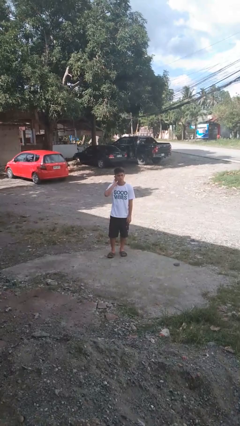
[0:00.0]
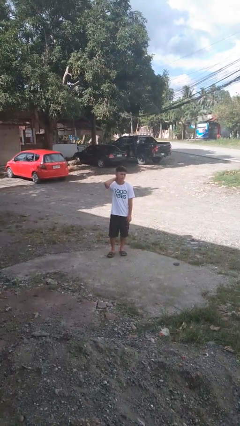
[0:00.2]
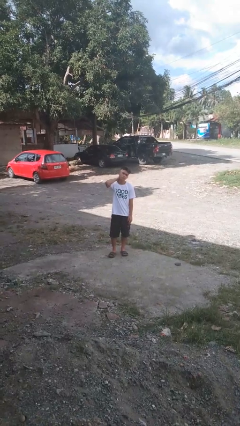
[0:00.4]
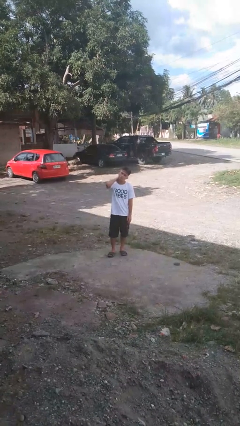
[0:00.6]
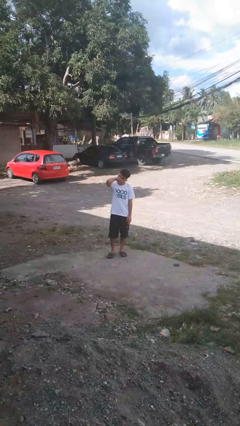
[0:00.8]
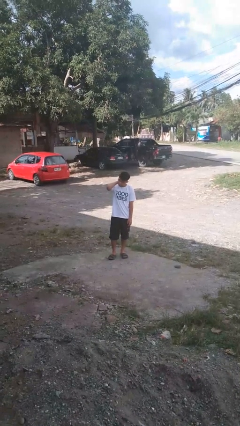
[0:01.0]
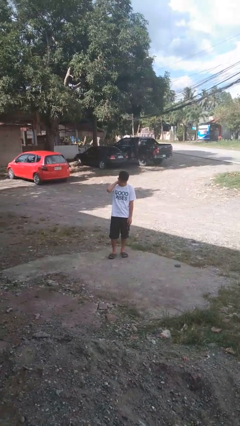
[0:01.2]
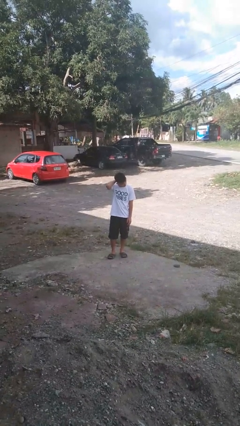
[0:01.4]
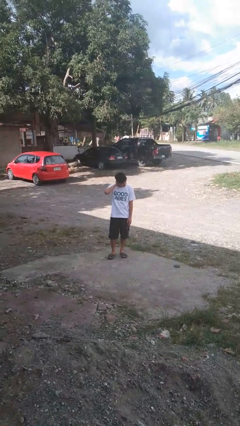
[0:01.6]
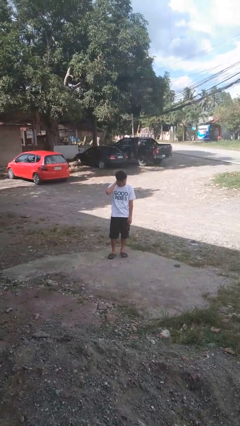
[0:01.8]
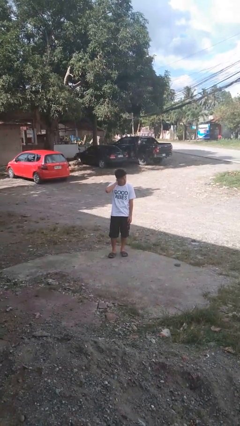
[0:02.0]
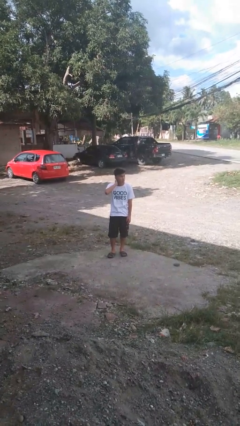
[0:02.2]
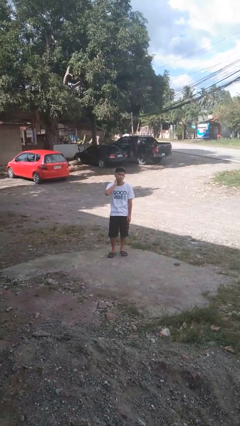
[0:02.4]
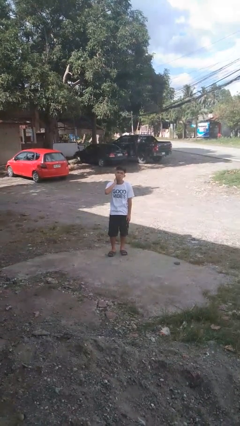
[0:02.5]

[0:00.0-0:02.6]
person rubs neck

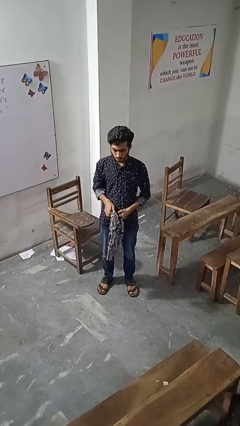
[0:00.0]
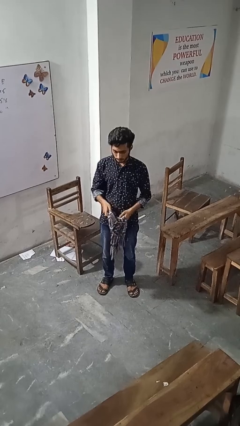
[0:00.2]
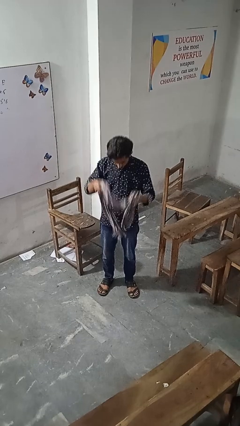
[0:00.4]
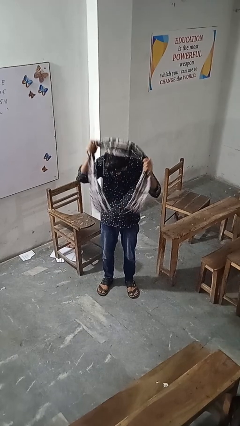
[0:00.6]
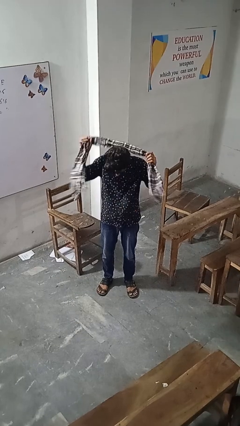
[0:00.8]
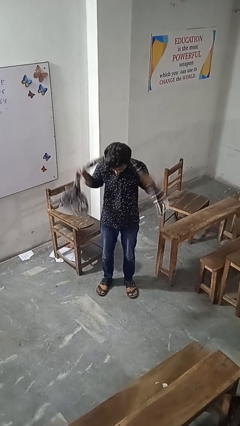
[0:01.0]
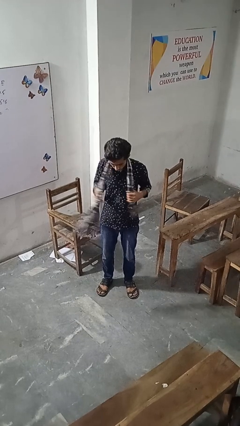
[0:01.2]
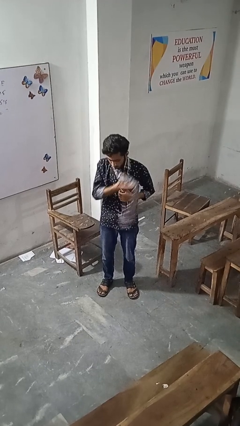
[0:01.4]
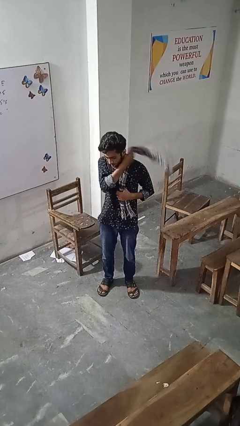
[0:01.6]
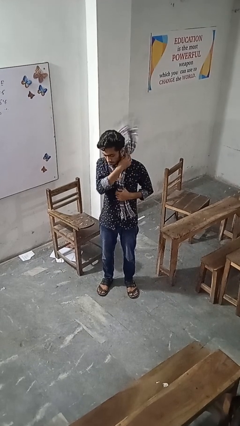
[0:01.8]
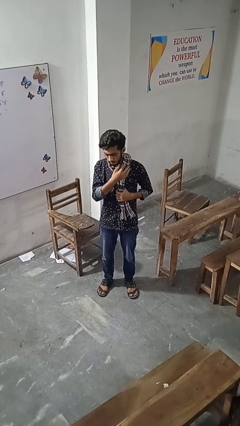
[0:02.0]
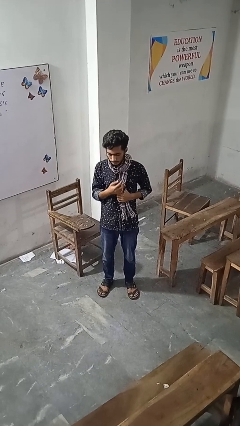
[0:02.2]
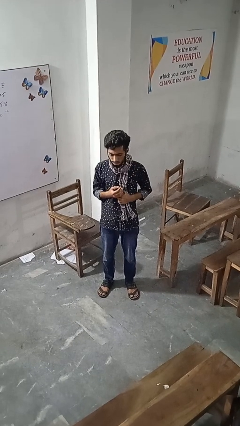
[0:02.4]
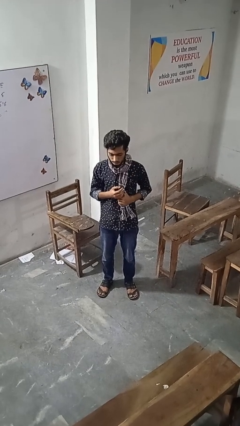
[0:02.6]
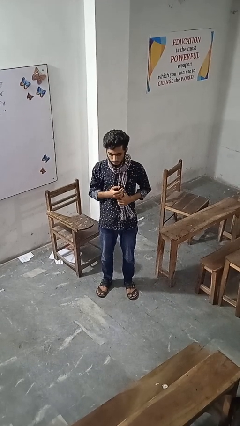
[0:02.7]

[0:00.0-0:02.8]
person puts on scarf

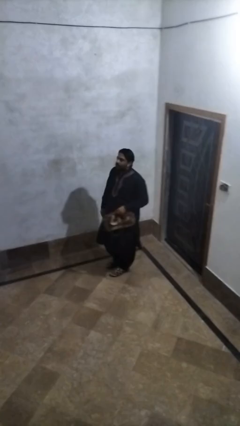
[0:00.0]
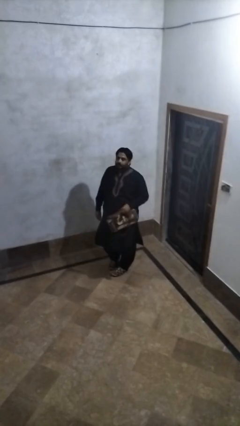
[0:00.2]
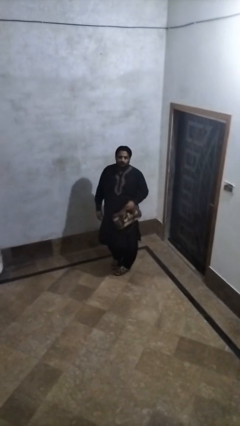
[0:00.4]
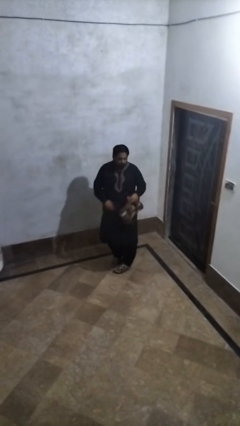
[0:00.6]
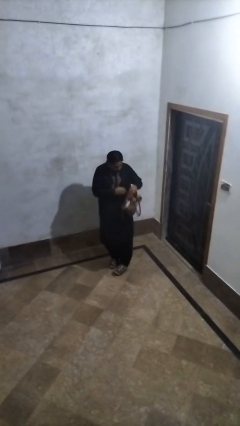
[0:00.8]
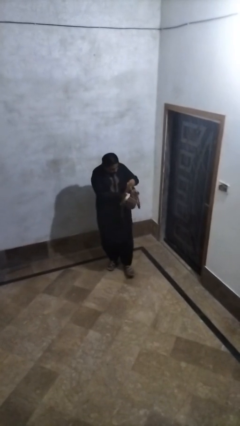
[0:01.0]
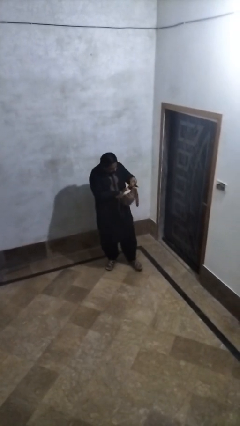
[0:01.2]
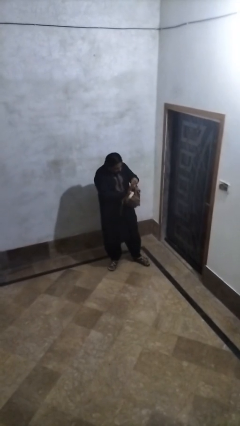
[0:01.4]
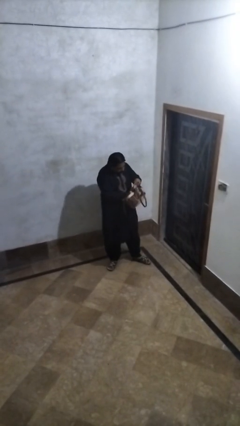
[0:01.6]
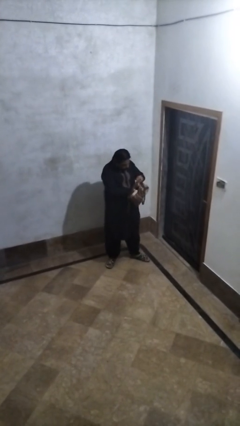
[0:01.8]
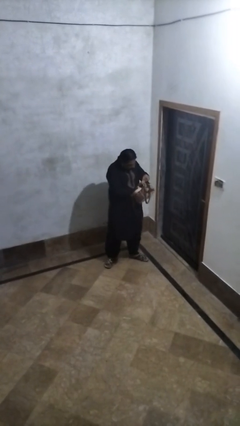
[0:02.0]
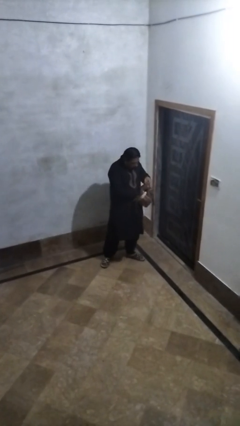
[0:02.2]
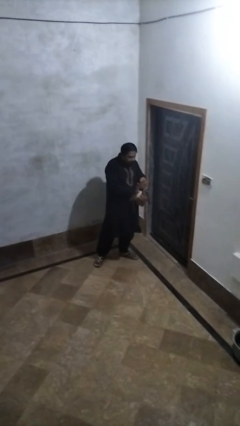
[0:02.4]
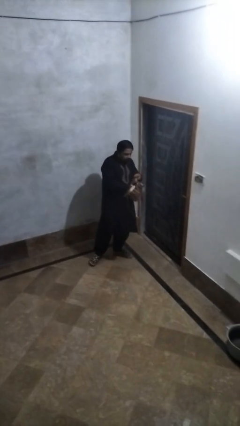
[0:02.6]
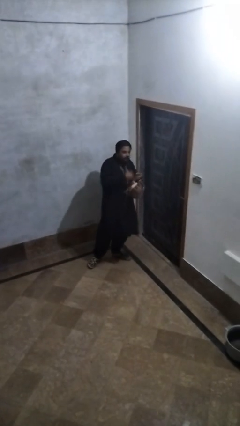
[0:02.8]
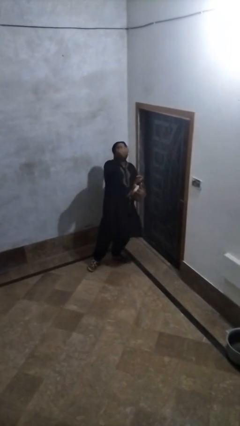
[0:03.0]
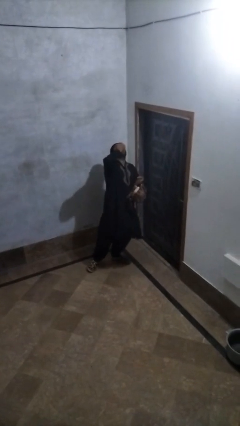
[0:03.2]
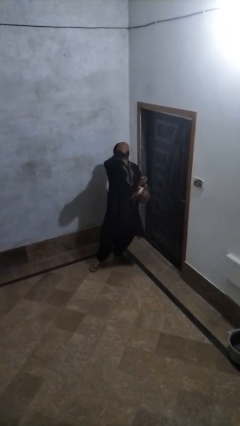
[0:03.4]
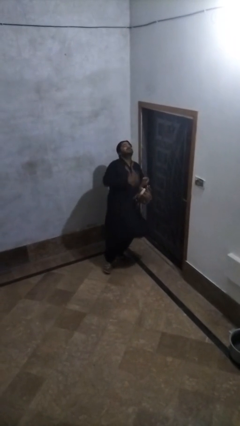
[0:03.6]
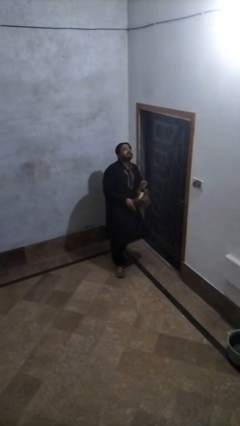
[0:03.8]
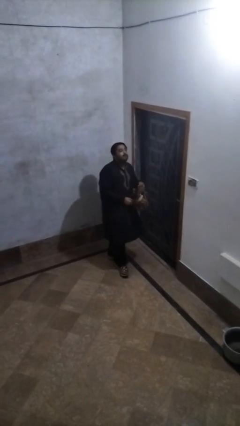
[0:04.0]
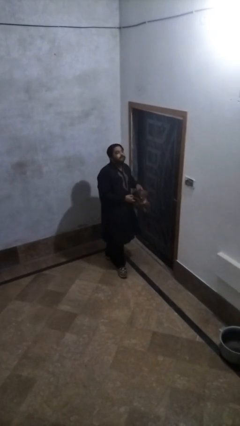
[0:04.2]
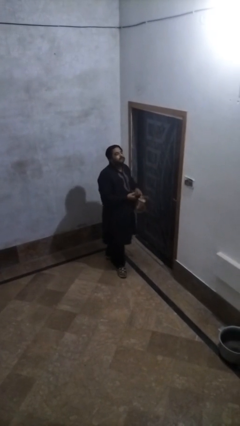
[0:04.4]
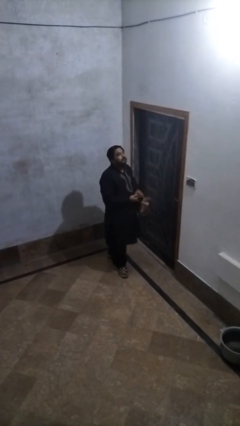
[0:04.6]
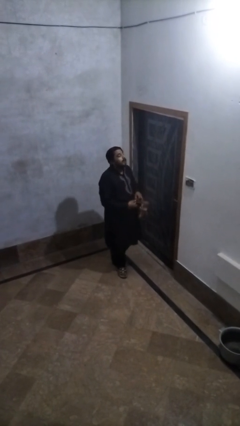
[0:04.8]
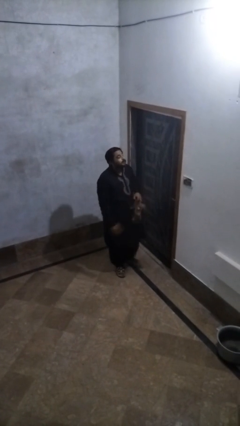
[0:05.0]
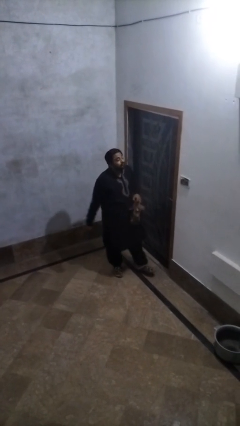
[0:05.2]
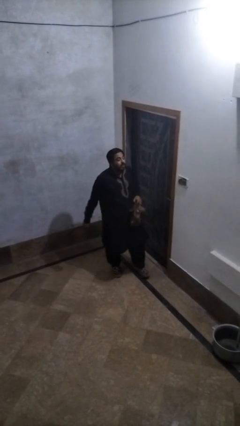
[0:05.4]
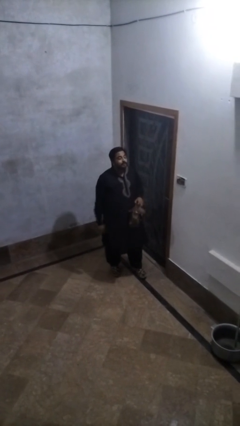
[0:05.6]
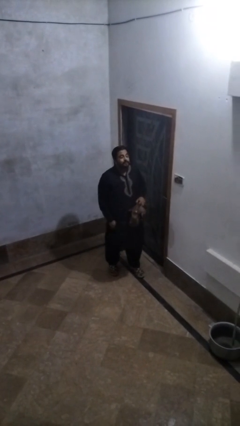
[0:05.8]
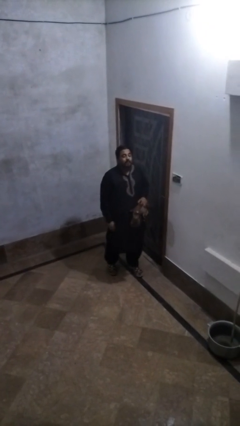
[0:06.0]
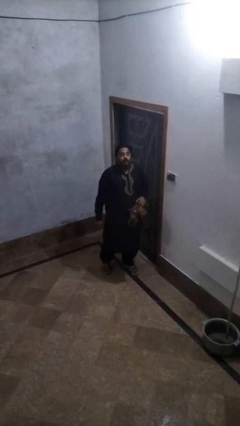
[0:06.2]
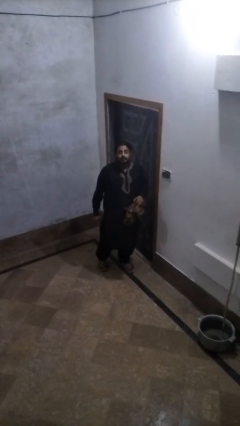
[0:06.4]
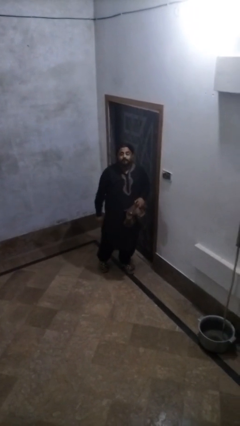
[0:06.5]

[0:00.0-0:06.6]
person eats snack from bag

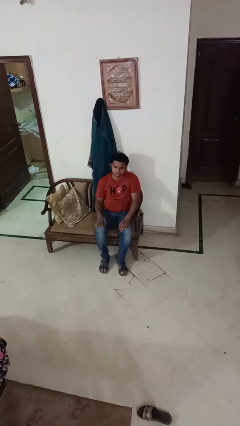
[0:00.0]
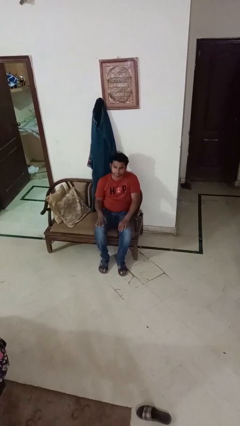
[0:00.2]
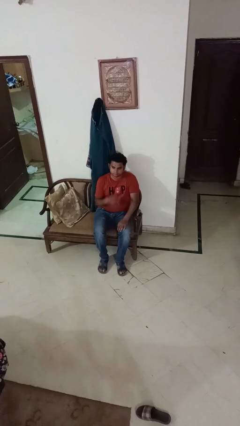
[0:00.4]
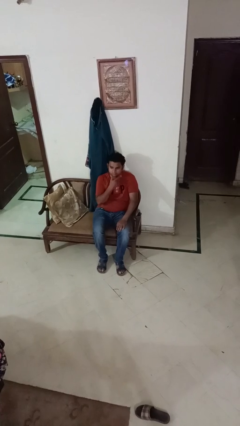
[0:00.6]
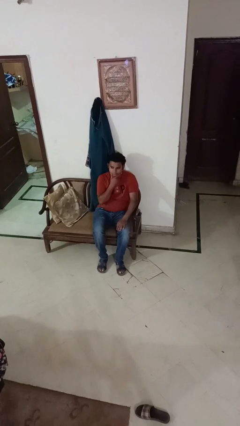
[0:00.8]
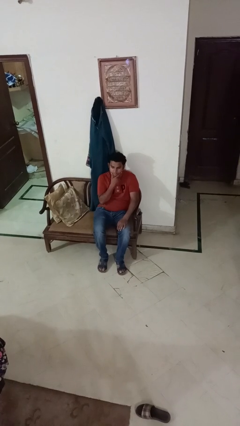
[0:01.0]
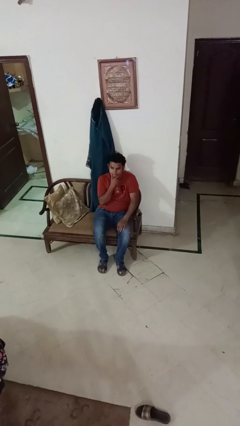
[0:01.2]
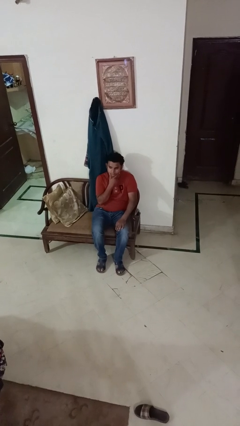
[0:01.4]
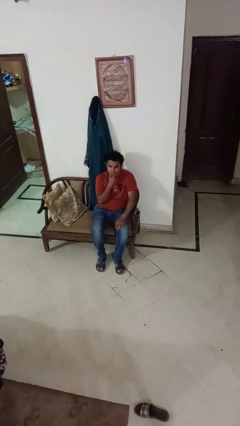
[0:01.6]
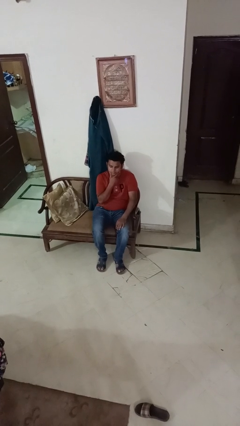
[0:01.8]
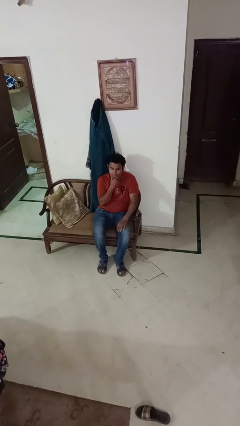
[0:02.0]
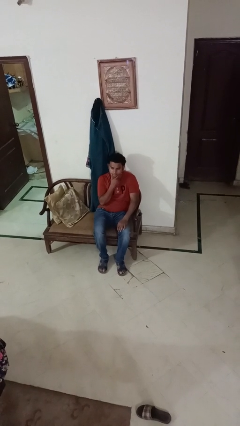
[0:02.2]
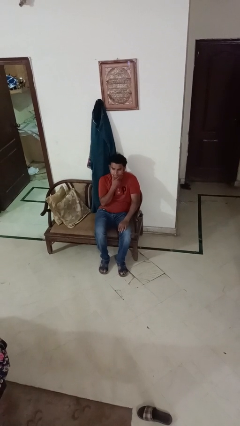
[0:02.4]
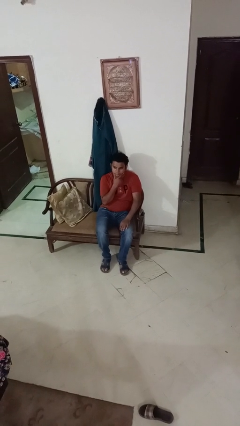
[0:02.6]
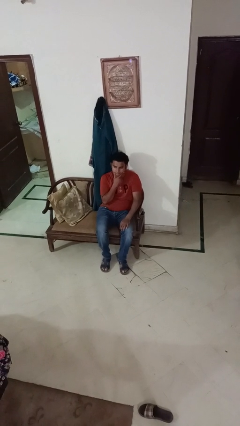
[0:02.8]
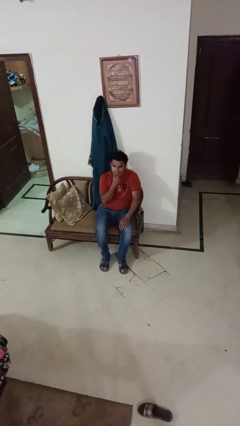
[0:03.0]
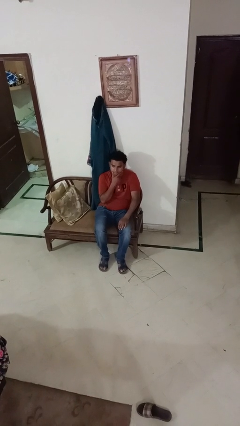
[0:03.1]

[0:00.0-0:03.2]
person strokes chin

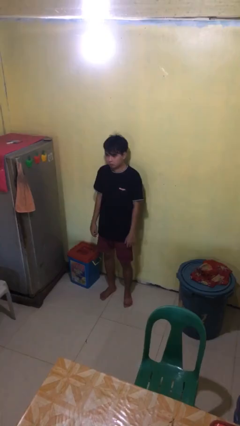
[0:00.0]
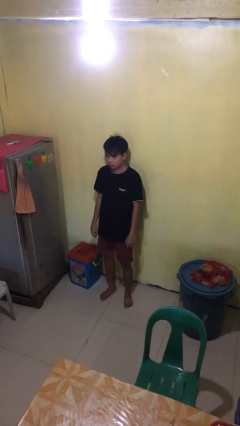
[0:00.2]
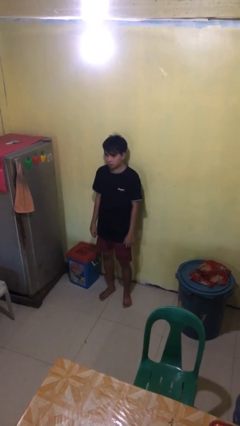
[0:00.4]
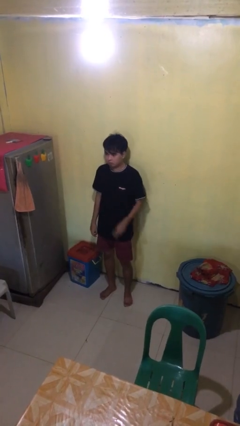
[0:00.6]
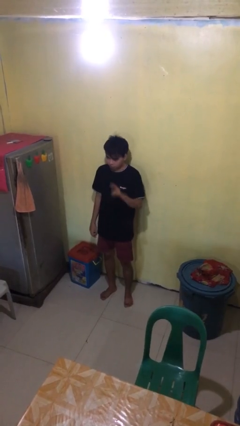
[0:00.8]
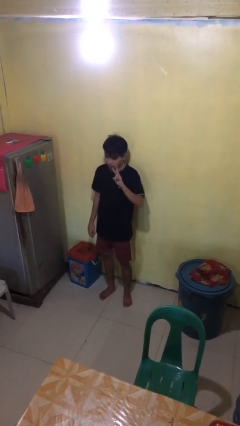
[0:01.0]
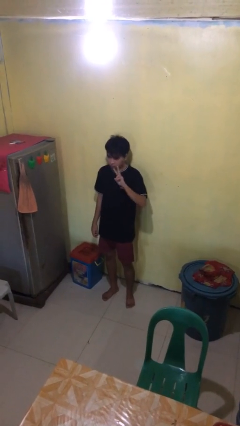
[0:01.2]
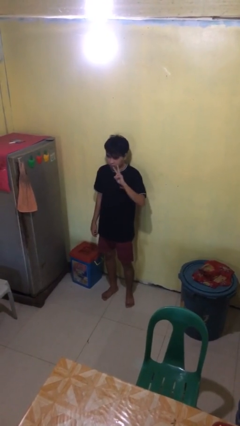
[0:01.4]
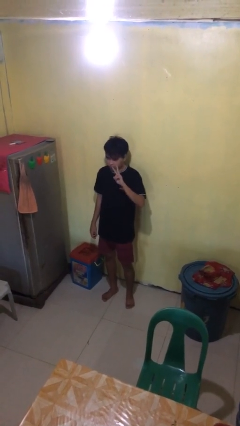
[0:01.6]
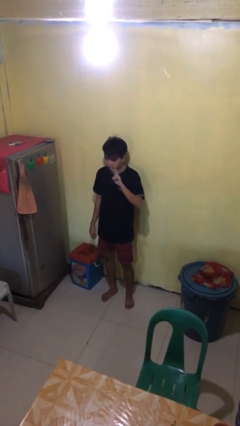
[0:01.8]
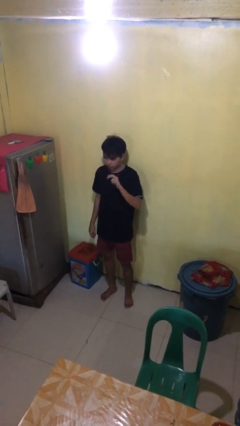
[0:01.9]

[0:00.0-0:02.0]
person gestures peace

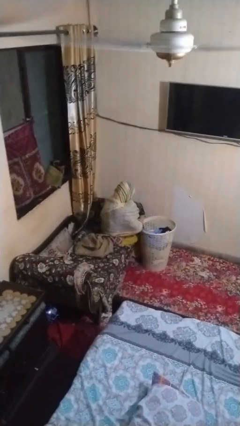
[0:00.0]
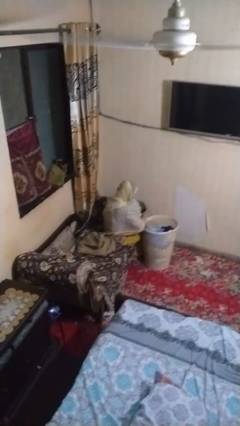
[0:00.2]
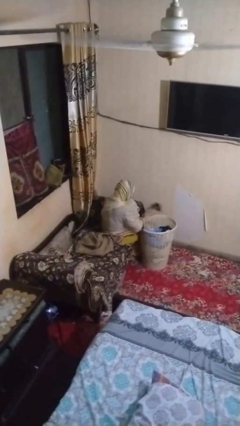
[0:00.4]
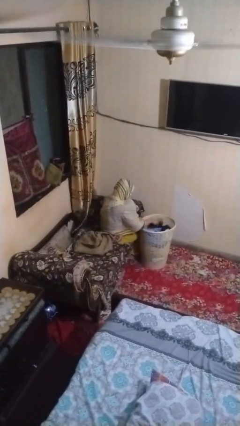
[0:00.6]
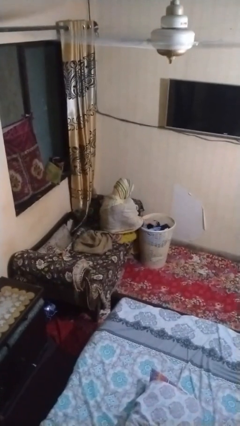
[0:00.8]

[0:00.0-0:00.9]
person puts object into basket
